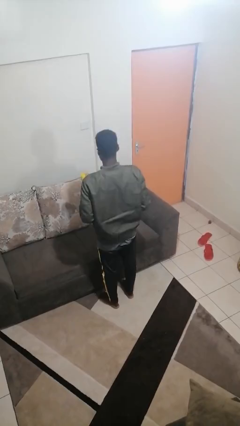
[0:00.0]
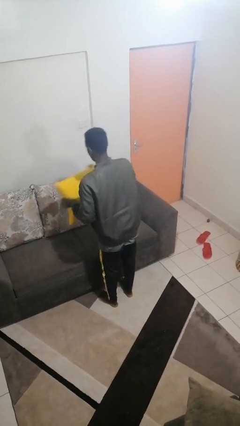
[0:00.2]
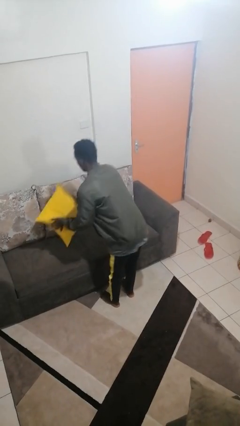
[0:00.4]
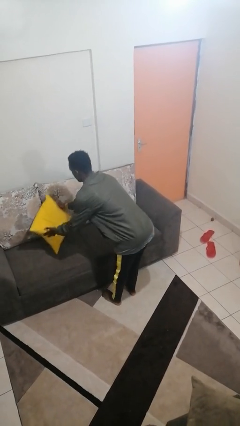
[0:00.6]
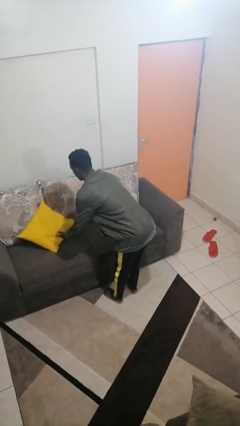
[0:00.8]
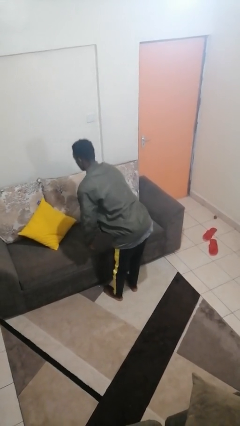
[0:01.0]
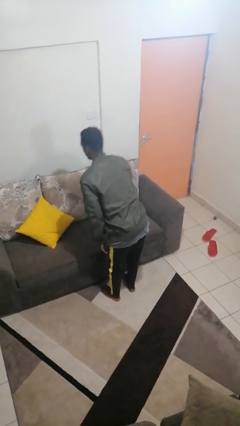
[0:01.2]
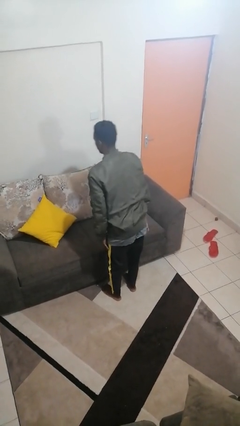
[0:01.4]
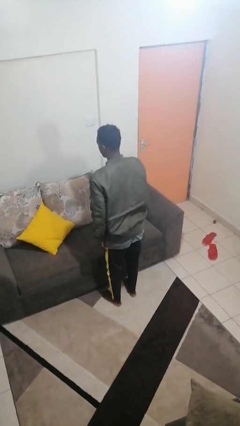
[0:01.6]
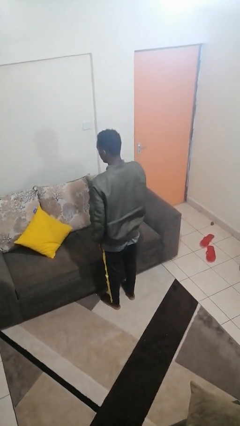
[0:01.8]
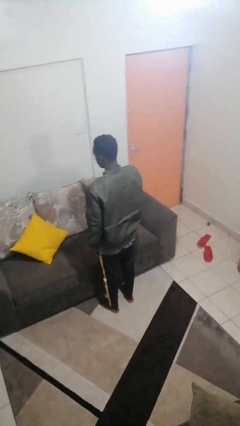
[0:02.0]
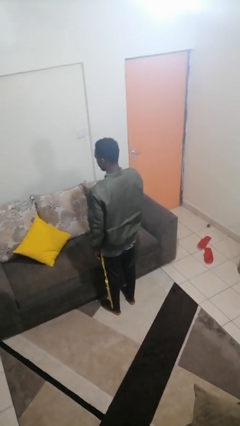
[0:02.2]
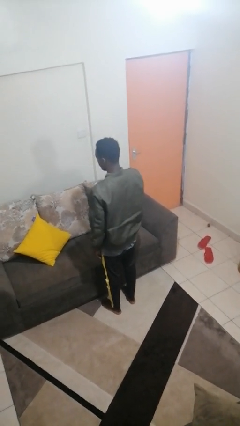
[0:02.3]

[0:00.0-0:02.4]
person puts down object on couch

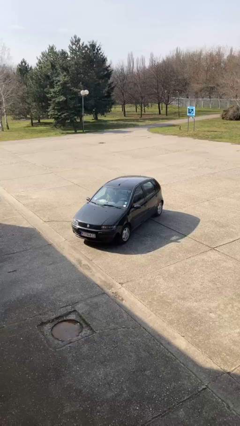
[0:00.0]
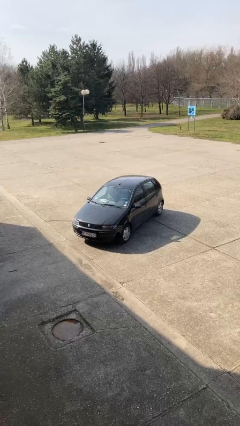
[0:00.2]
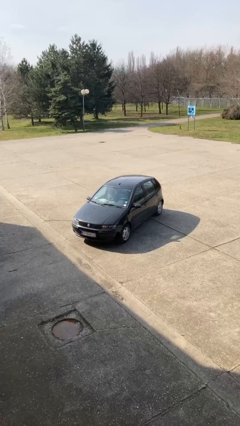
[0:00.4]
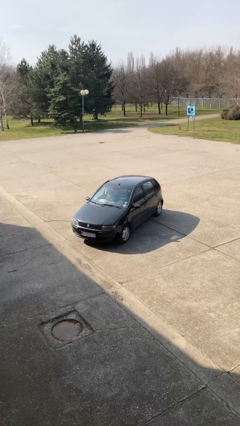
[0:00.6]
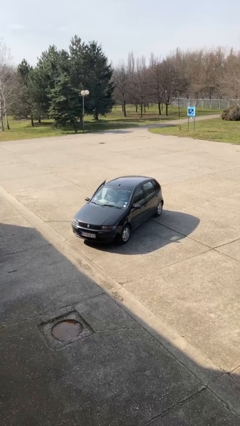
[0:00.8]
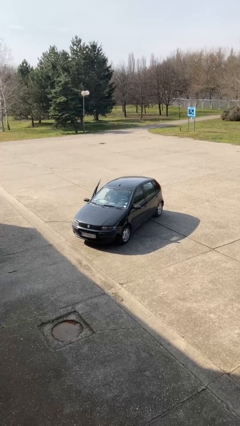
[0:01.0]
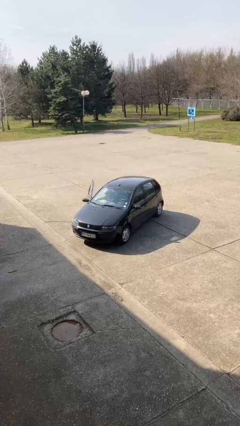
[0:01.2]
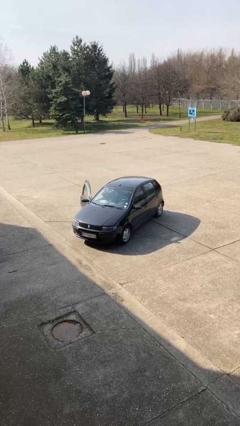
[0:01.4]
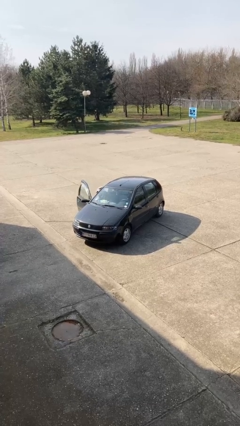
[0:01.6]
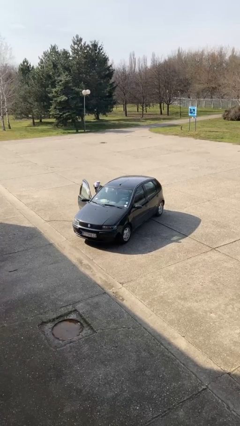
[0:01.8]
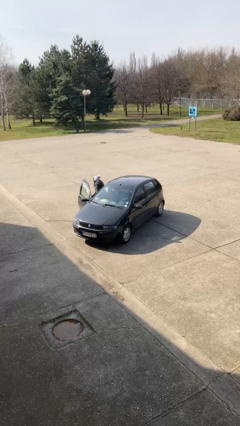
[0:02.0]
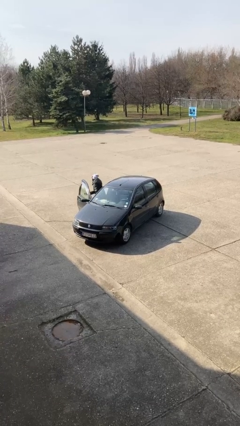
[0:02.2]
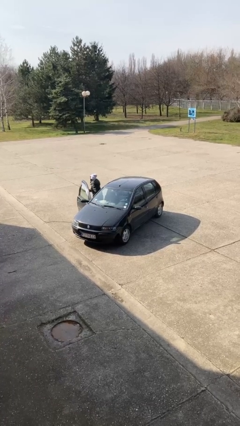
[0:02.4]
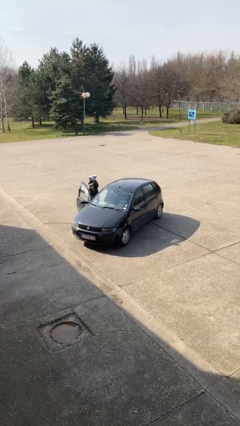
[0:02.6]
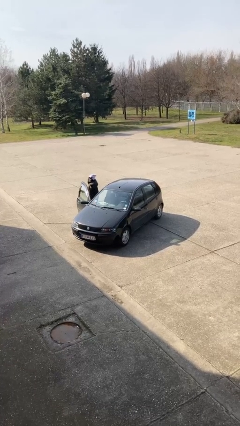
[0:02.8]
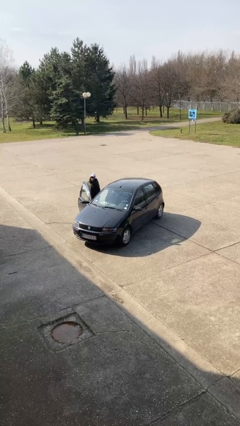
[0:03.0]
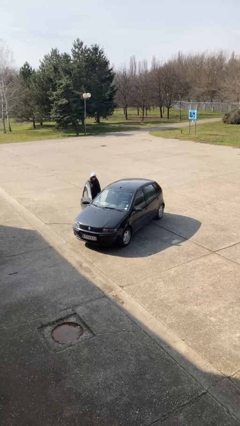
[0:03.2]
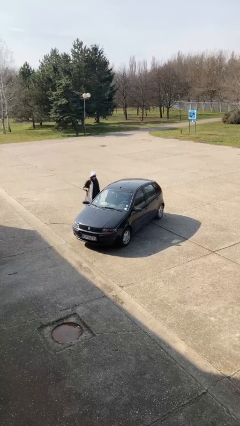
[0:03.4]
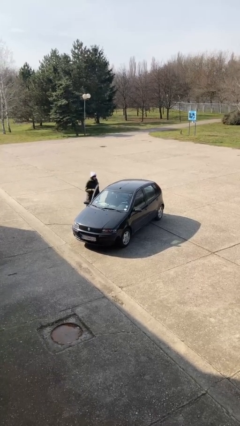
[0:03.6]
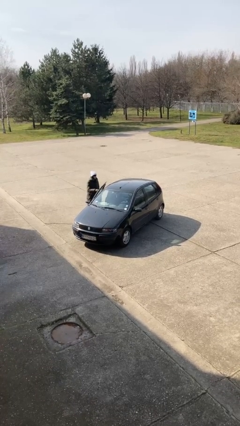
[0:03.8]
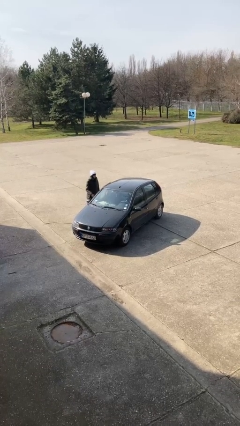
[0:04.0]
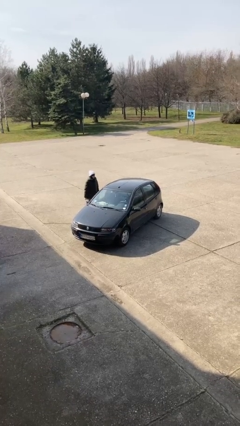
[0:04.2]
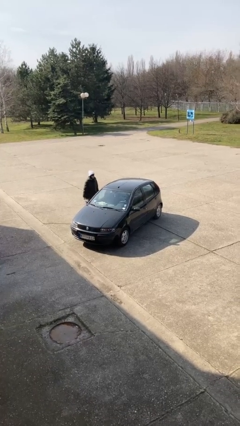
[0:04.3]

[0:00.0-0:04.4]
car drops off person

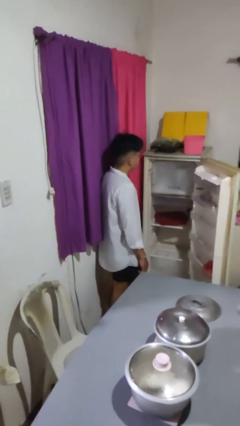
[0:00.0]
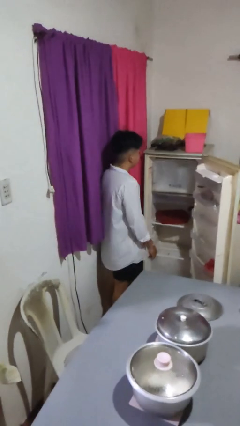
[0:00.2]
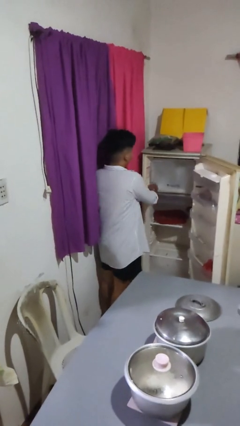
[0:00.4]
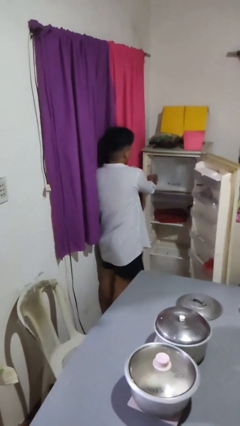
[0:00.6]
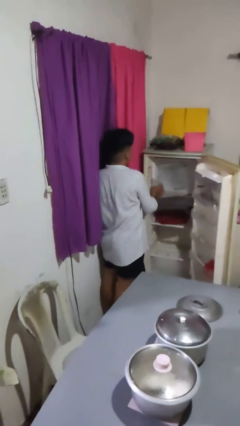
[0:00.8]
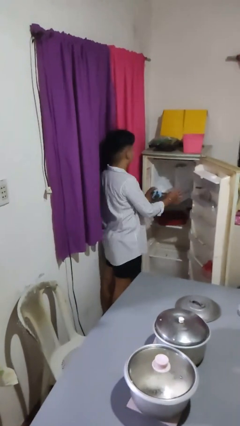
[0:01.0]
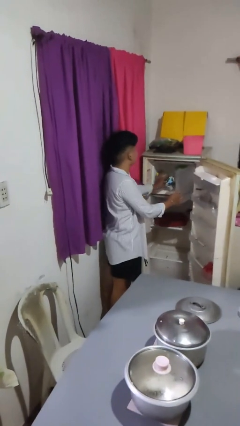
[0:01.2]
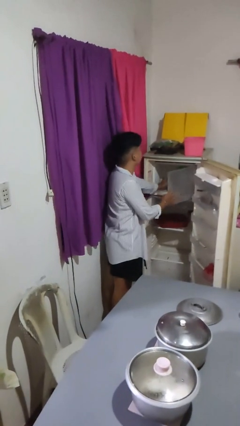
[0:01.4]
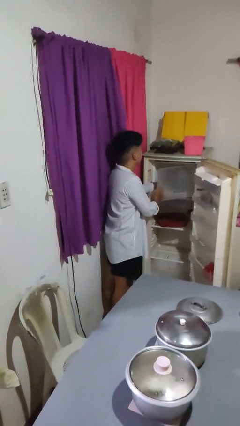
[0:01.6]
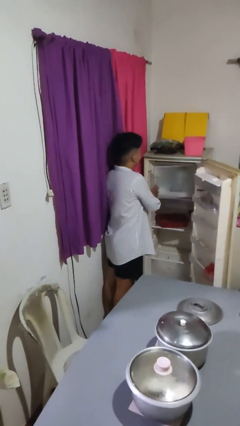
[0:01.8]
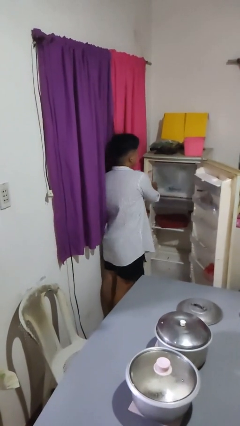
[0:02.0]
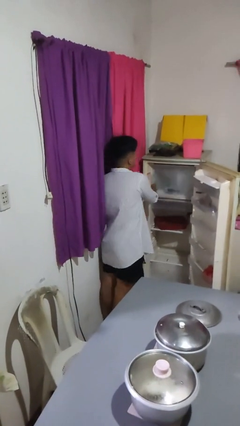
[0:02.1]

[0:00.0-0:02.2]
person puts object into refrigerator

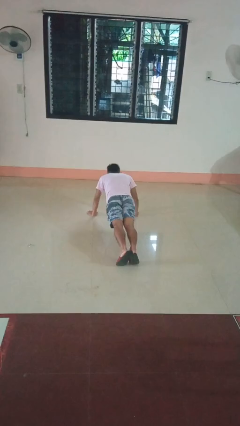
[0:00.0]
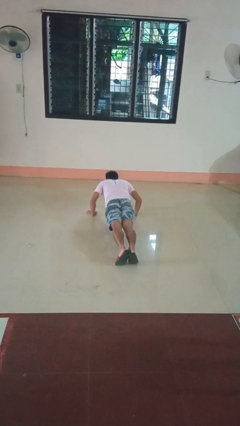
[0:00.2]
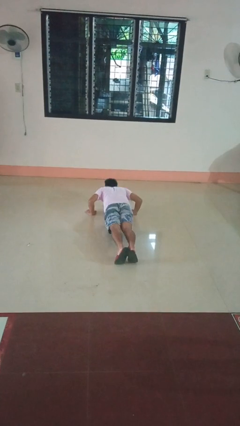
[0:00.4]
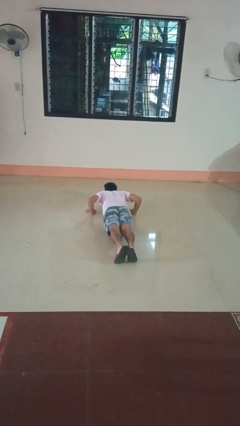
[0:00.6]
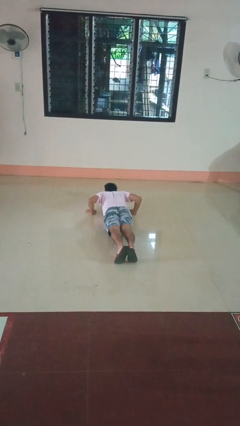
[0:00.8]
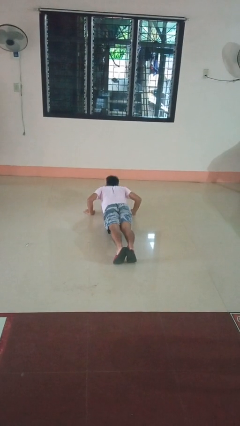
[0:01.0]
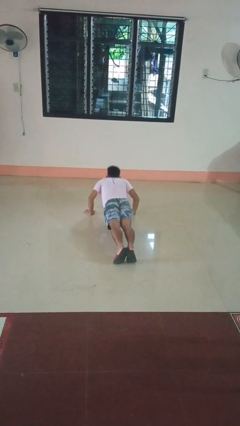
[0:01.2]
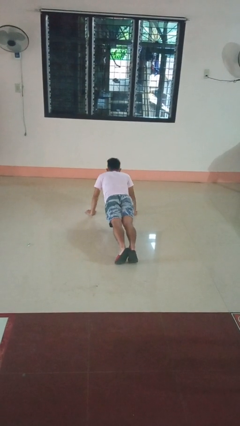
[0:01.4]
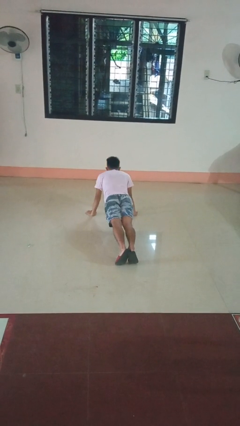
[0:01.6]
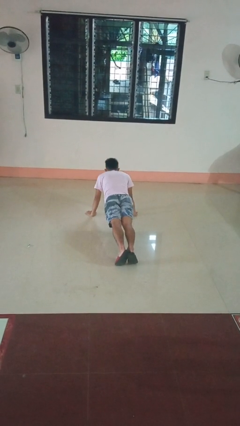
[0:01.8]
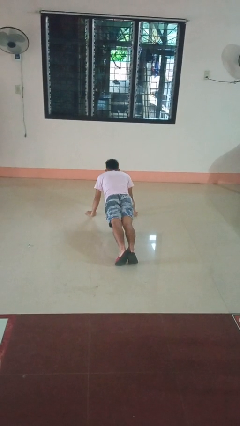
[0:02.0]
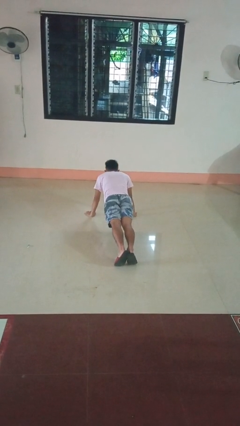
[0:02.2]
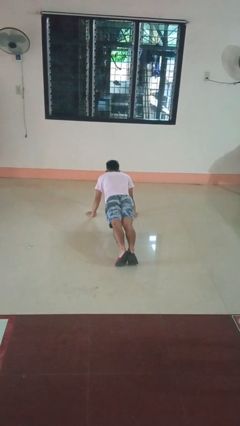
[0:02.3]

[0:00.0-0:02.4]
person exercises with pushup

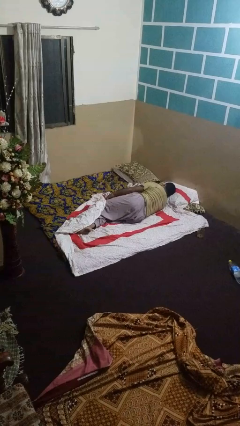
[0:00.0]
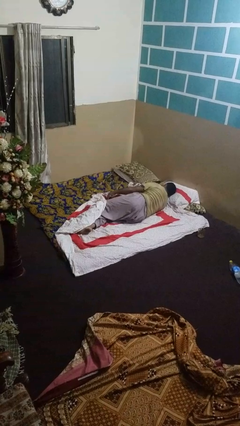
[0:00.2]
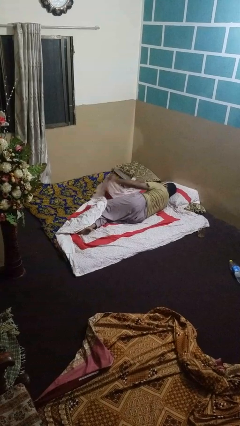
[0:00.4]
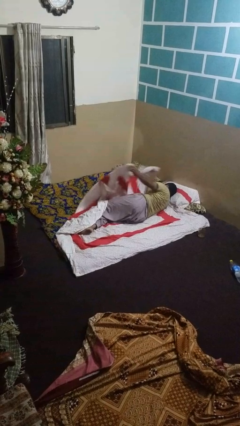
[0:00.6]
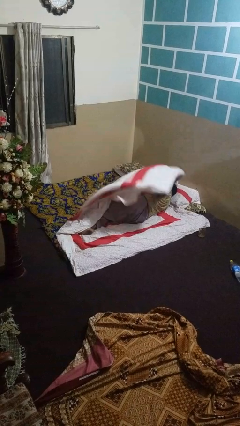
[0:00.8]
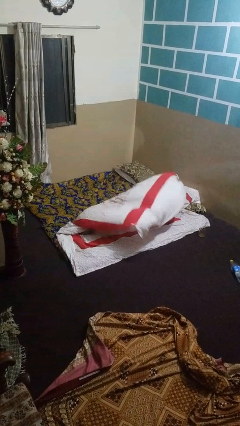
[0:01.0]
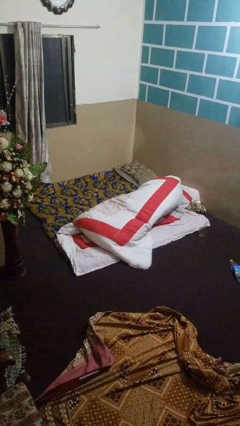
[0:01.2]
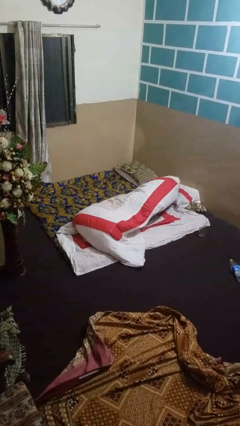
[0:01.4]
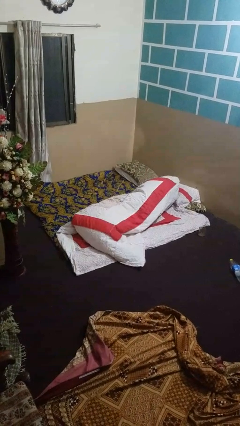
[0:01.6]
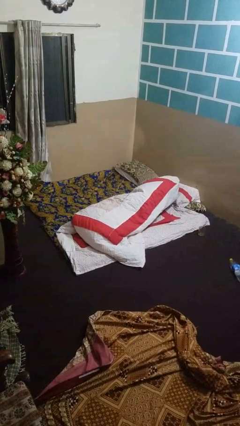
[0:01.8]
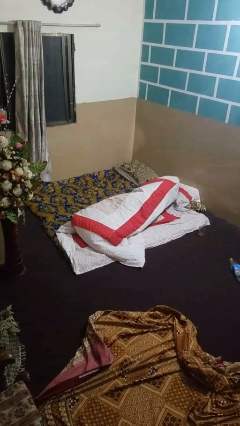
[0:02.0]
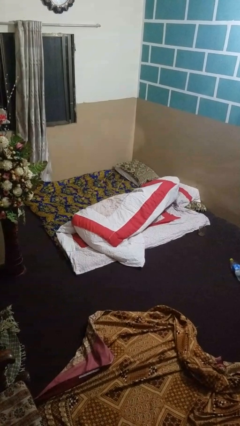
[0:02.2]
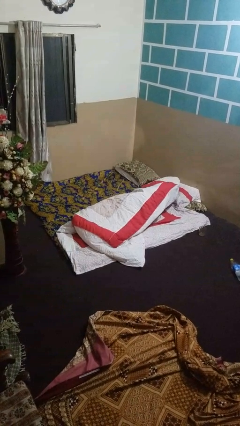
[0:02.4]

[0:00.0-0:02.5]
person covers with bedsheets

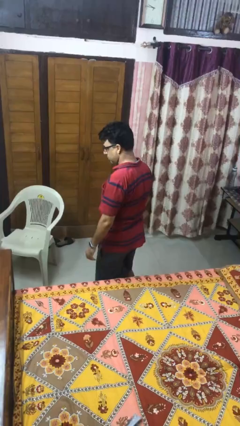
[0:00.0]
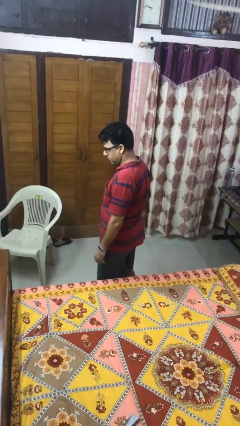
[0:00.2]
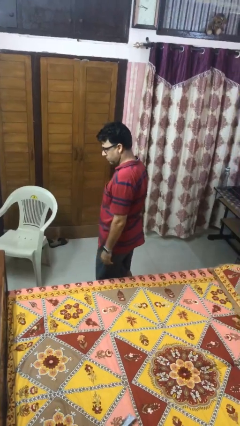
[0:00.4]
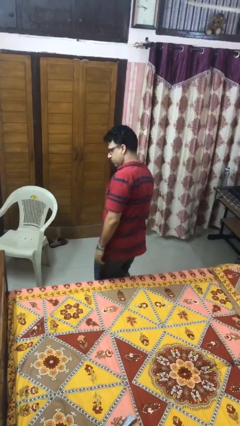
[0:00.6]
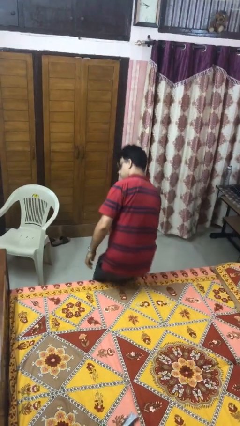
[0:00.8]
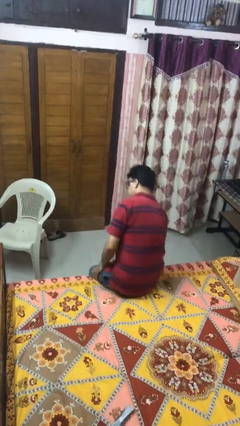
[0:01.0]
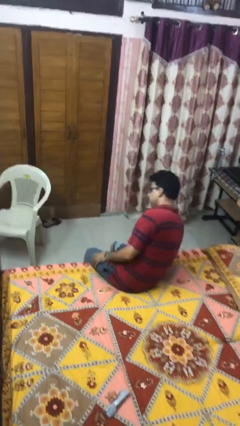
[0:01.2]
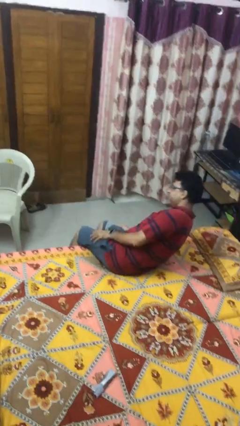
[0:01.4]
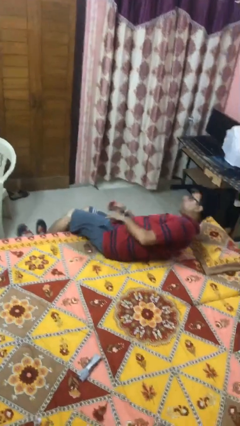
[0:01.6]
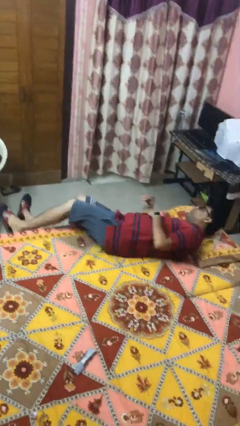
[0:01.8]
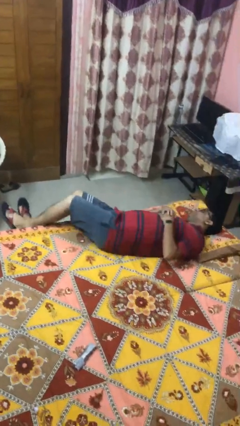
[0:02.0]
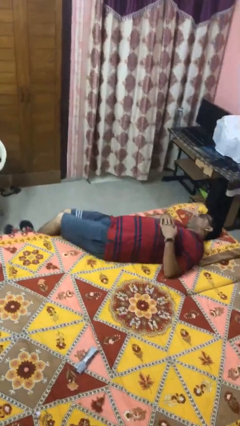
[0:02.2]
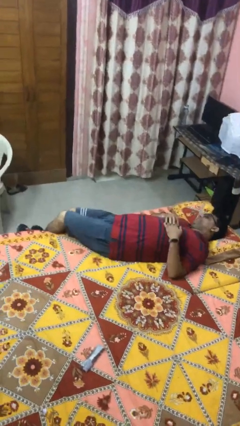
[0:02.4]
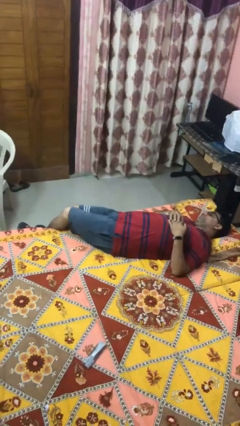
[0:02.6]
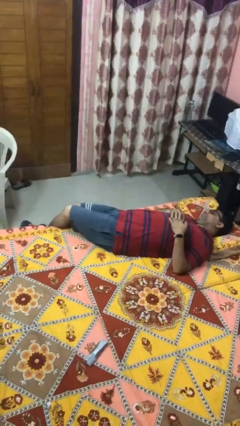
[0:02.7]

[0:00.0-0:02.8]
person lies down on bed

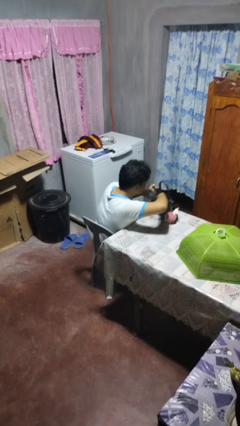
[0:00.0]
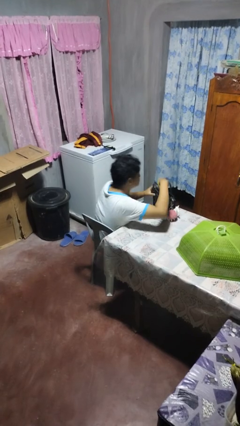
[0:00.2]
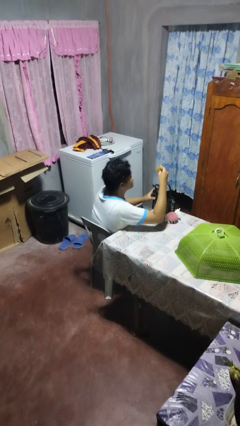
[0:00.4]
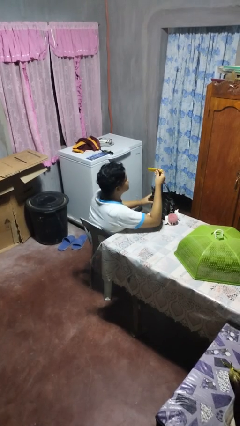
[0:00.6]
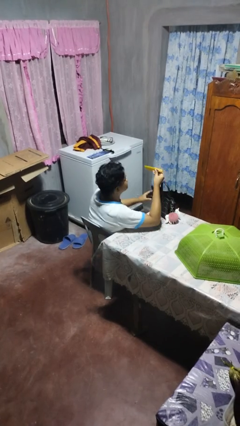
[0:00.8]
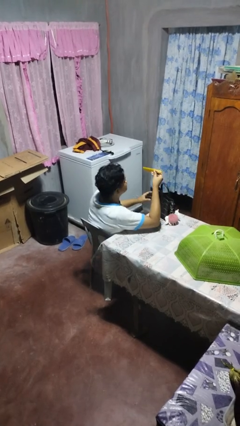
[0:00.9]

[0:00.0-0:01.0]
person takes object from purse
